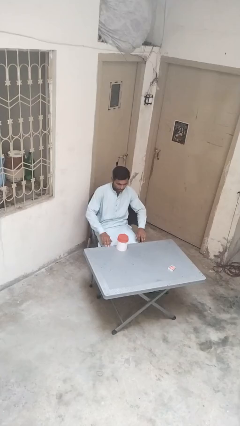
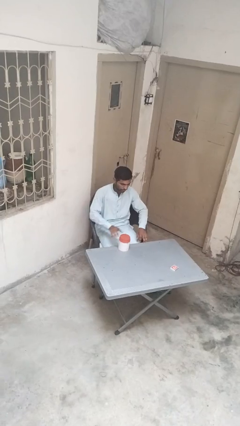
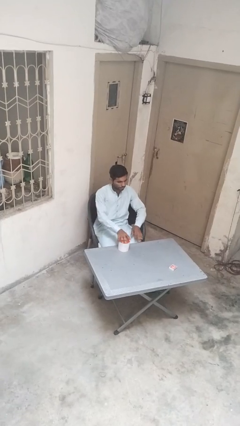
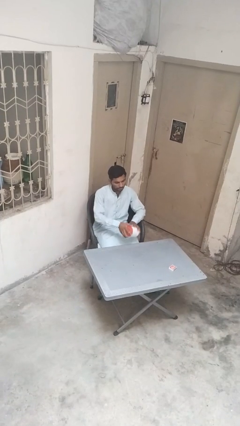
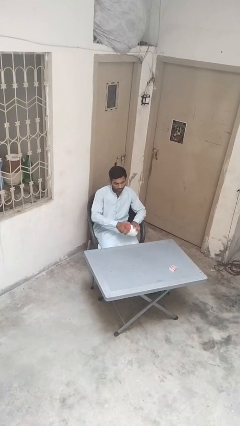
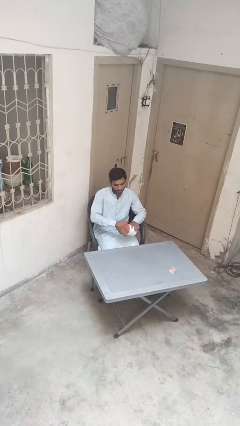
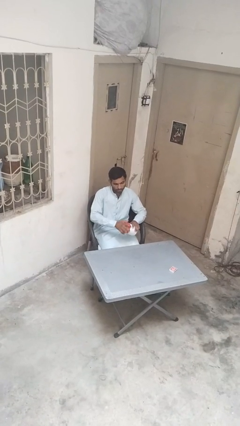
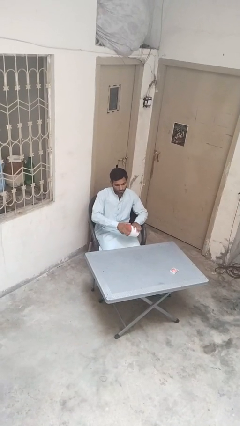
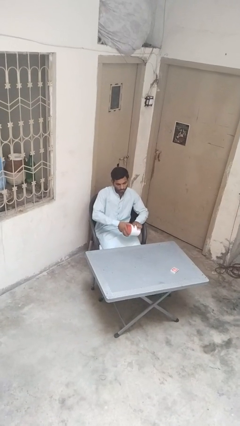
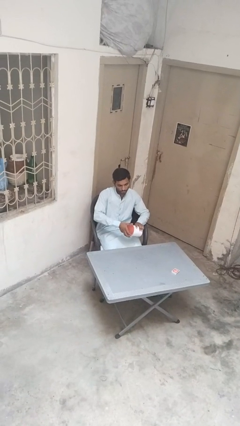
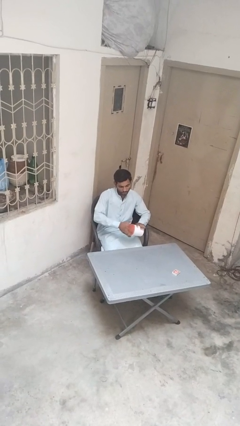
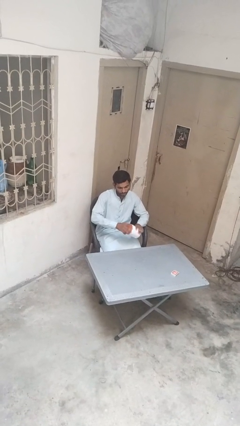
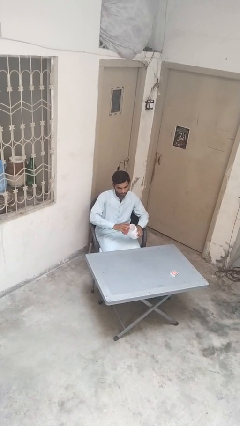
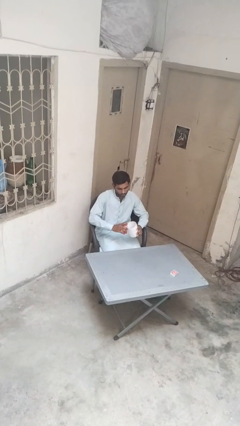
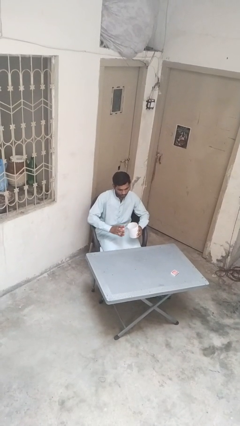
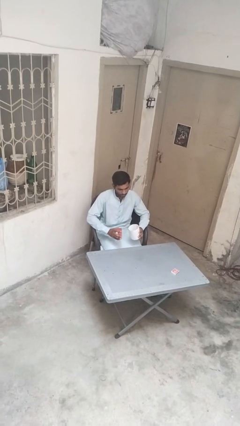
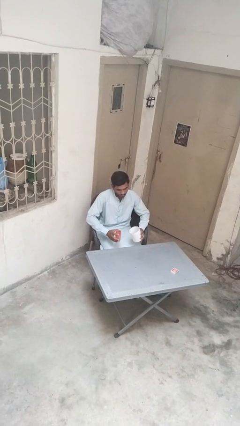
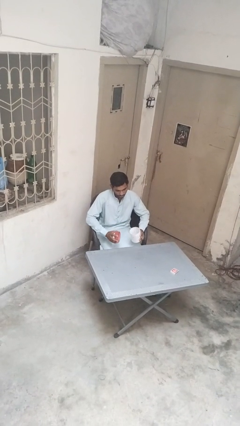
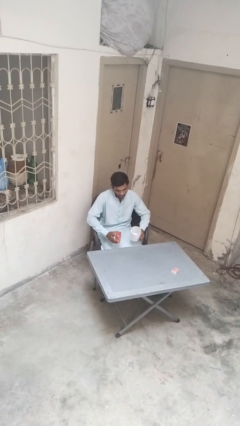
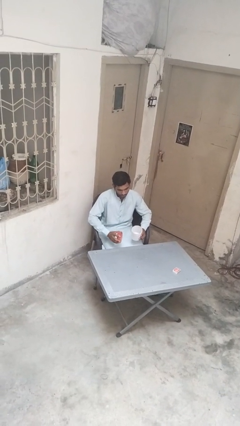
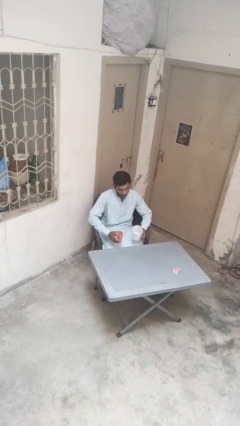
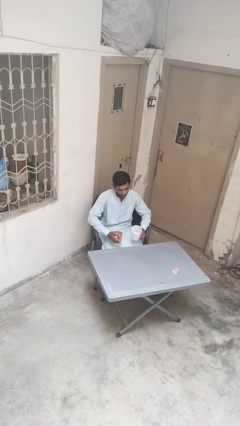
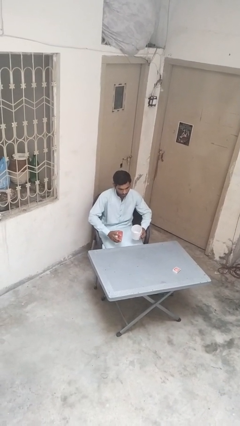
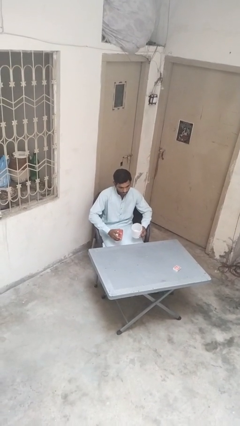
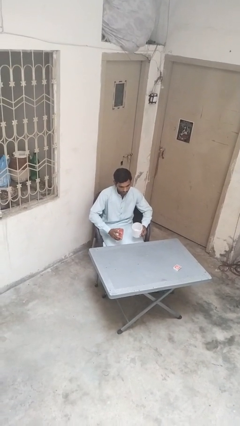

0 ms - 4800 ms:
person opens jar

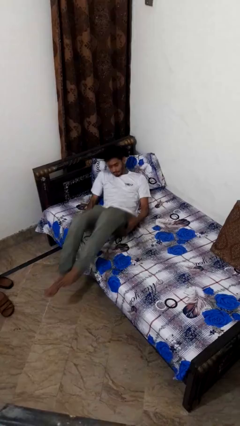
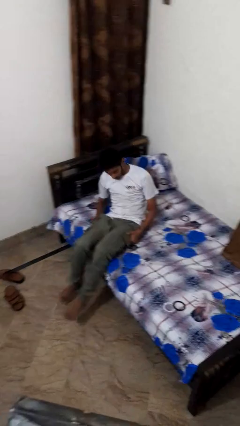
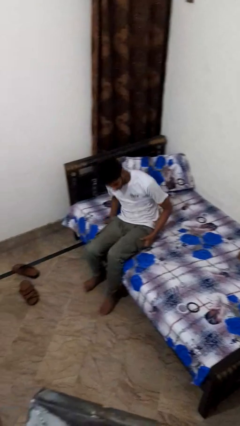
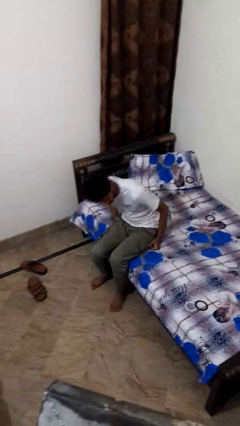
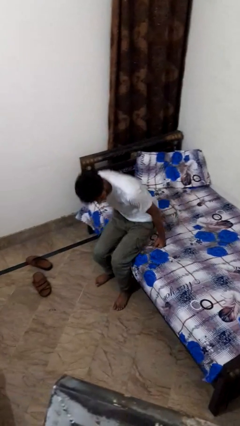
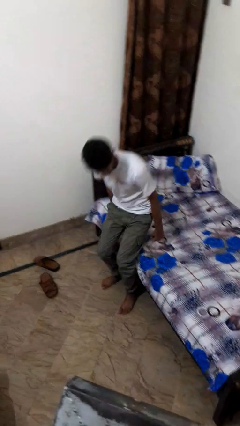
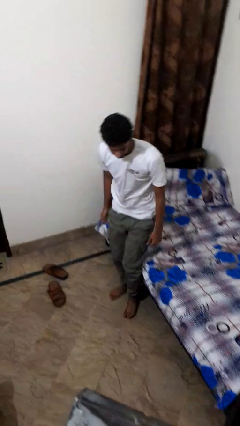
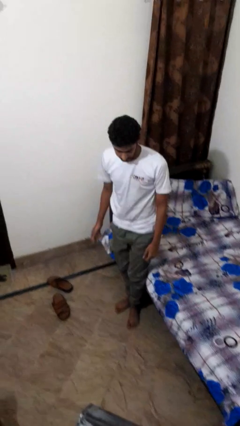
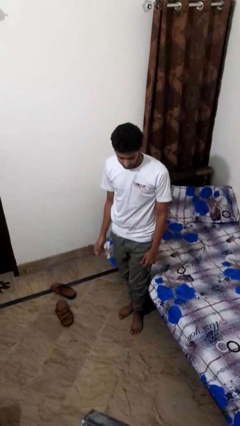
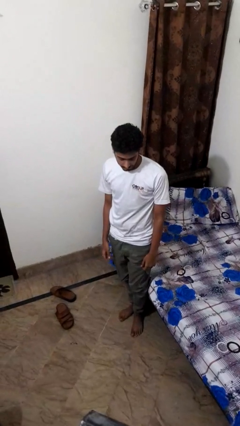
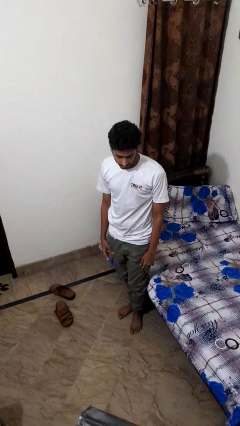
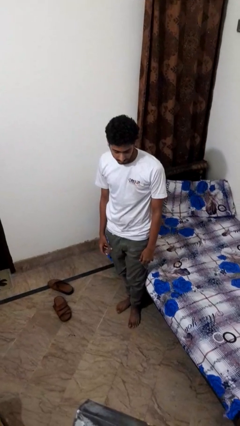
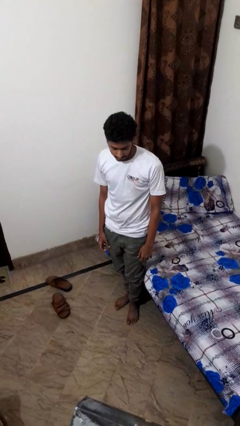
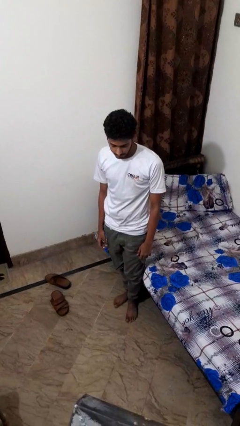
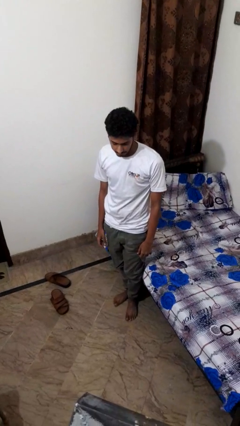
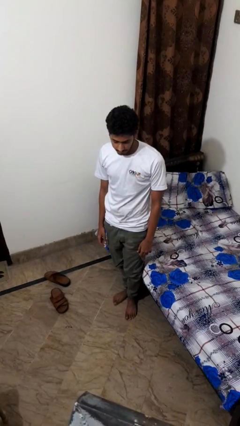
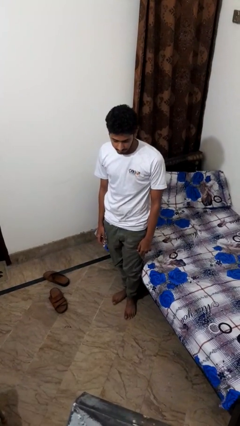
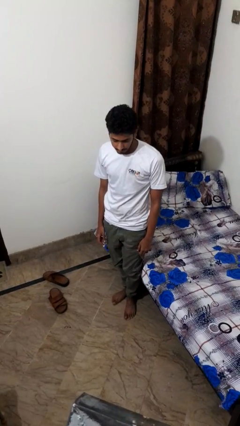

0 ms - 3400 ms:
person stands up

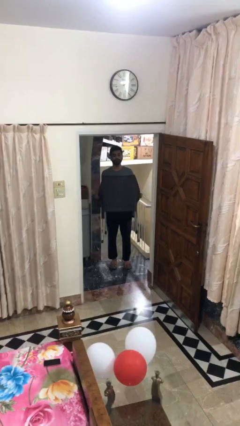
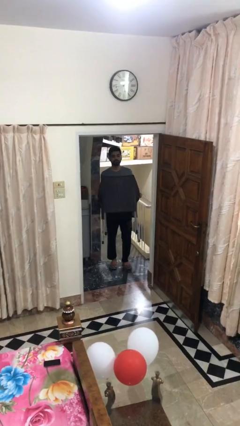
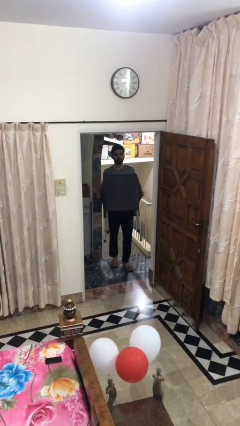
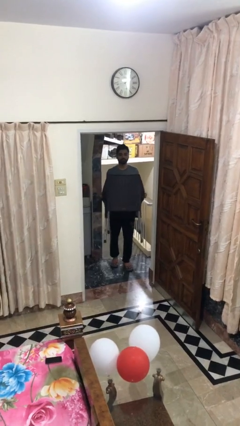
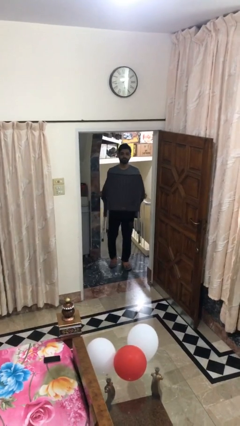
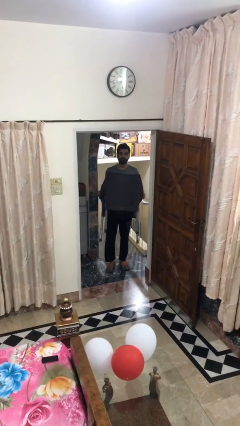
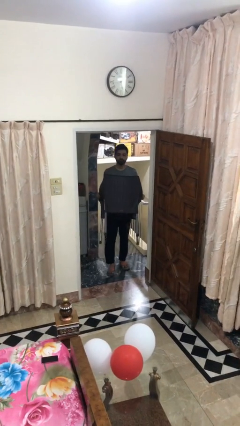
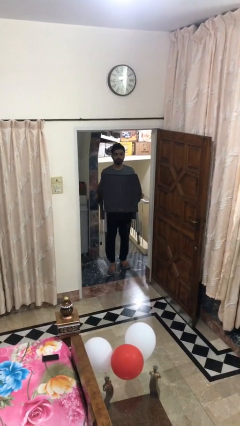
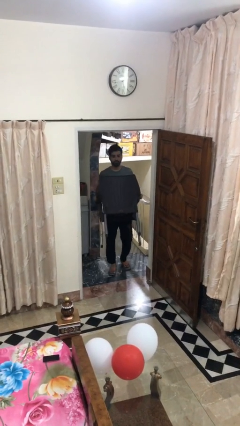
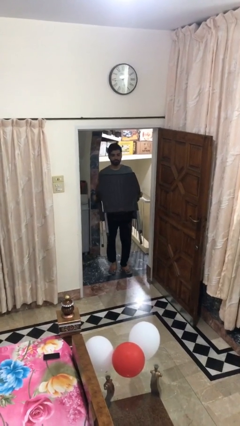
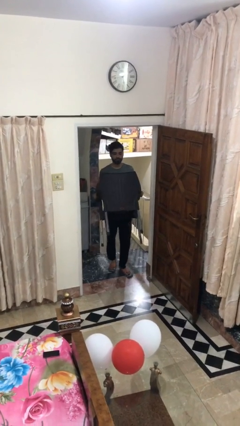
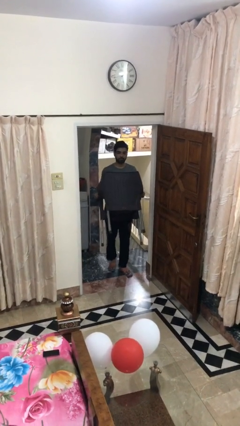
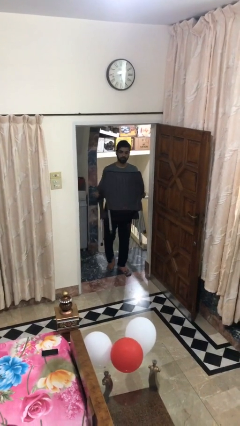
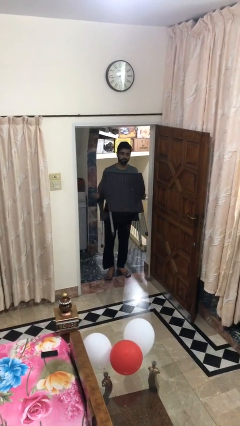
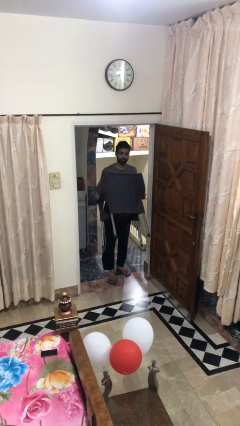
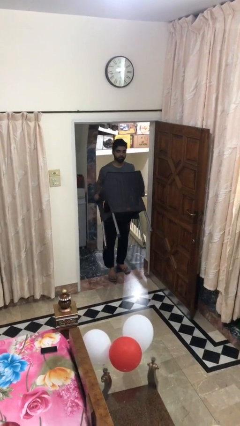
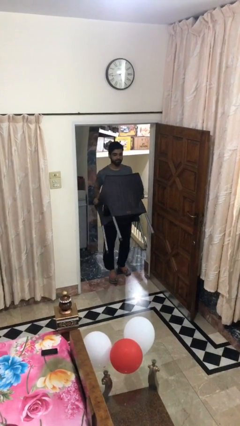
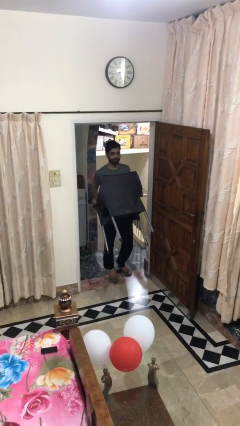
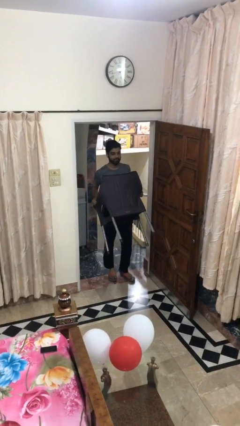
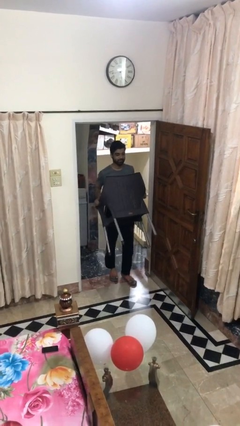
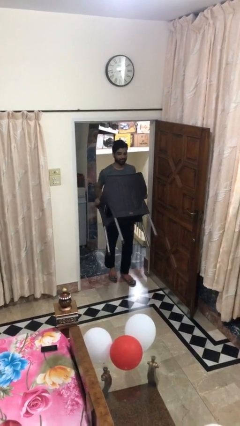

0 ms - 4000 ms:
person carries heavy object

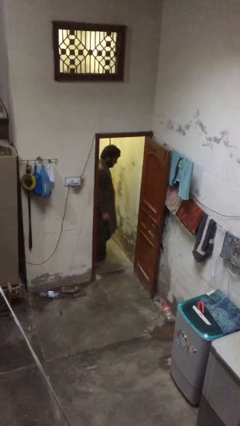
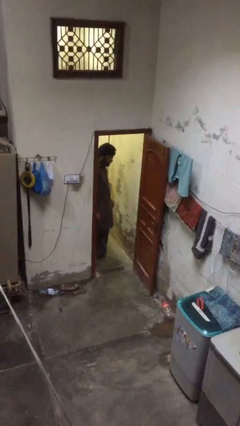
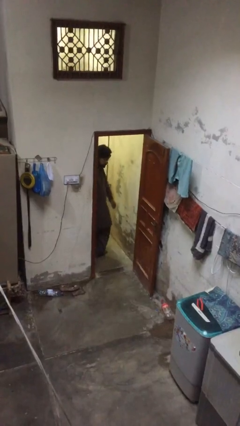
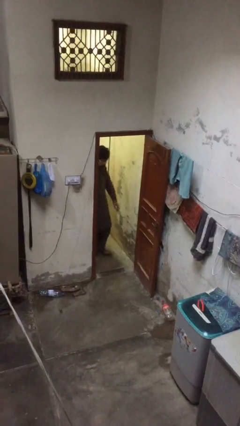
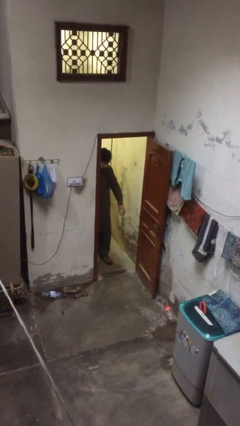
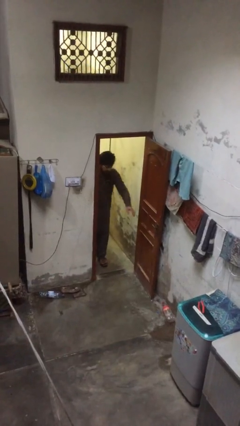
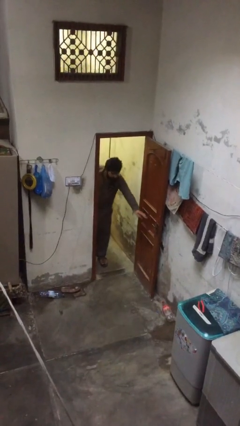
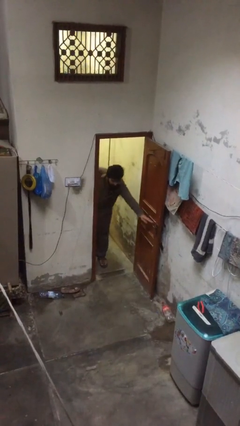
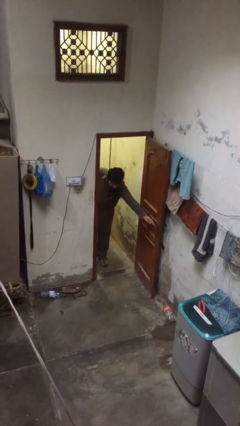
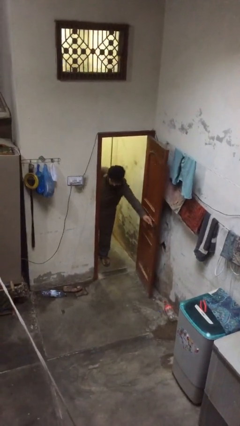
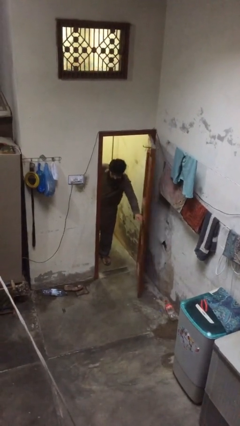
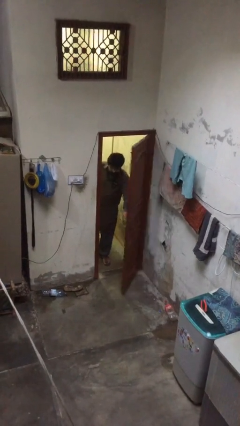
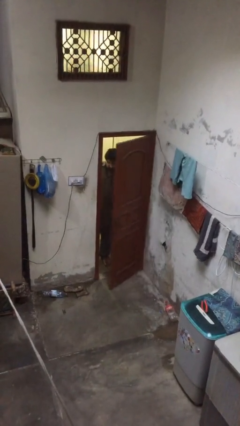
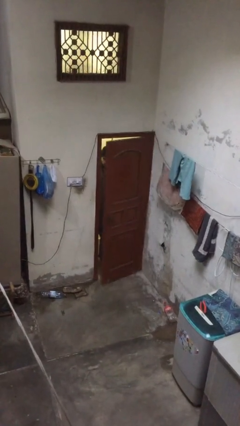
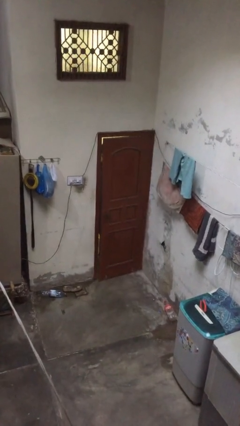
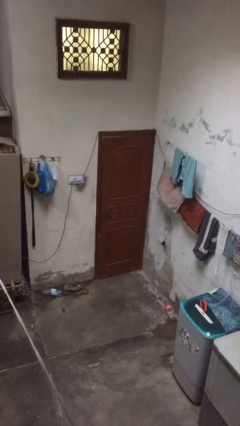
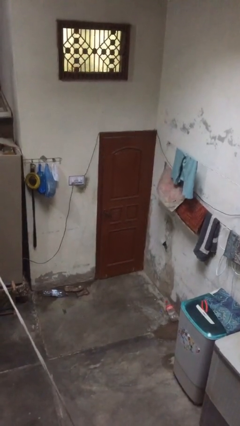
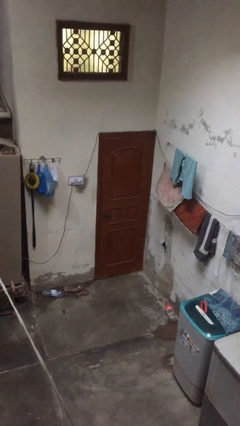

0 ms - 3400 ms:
person closes facility door

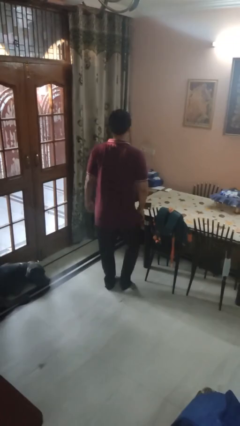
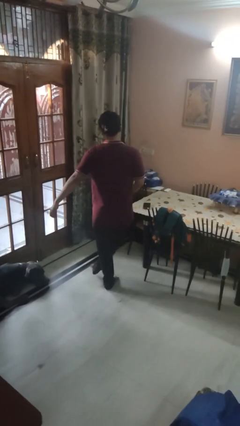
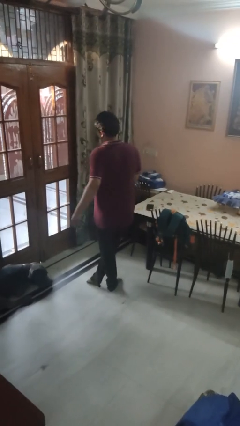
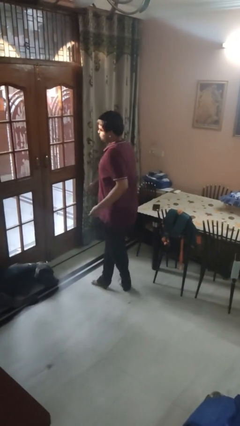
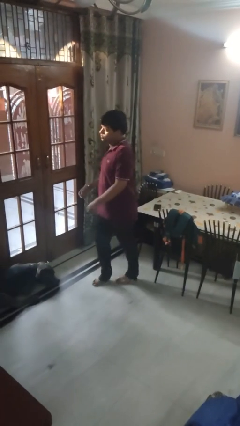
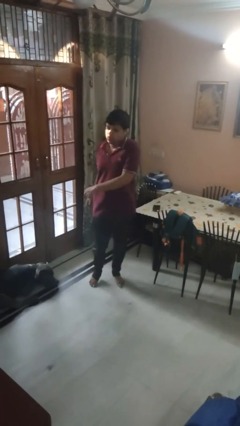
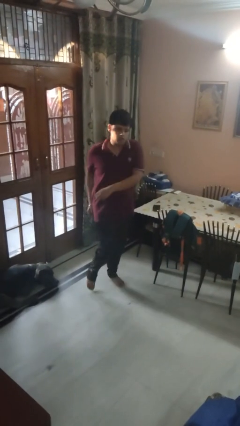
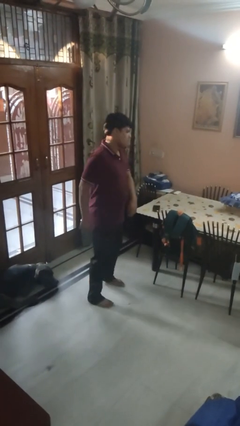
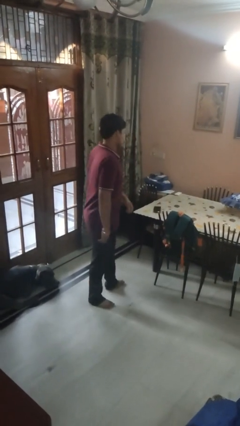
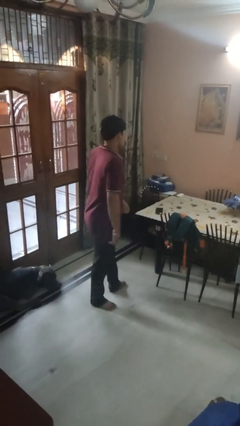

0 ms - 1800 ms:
person twirls

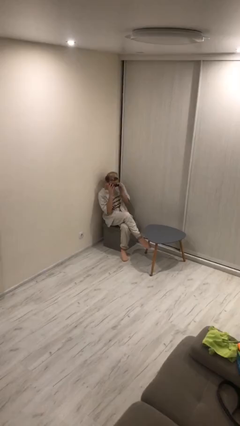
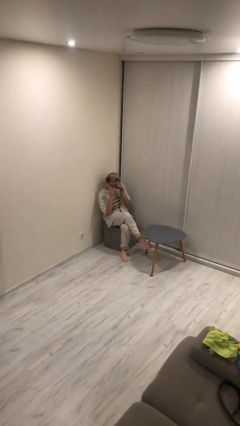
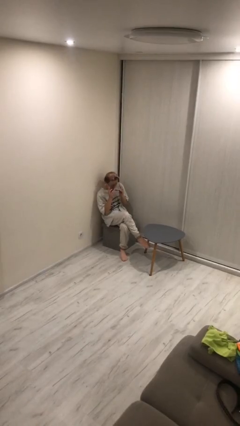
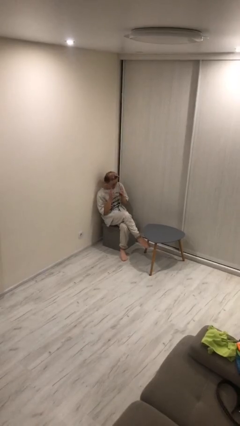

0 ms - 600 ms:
person takes off sunglasses
